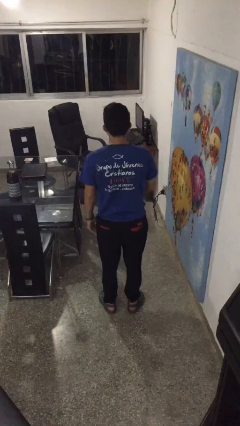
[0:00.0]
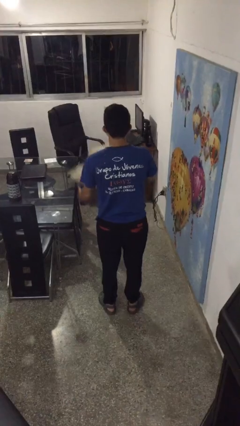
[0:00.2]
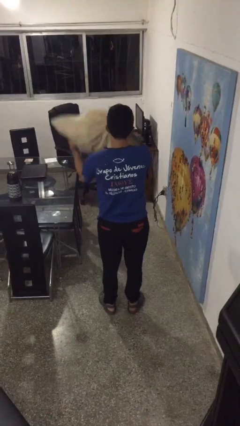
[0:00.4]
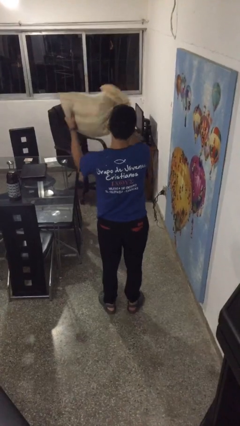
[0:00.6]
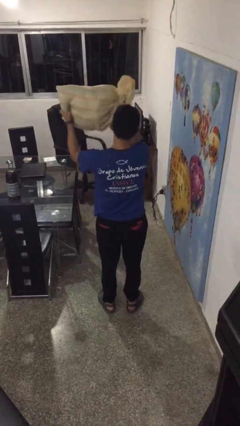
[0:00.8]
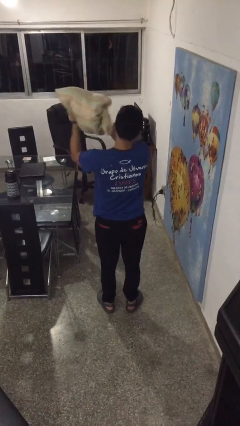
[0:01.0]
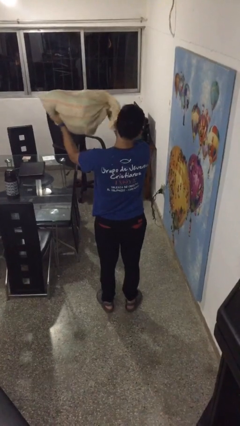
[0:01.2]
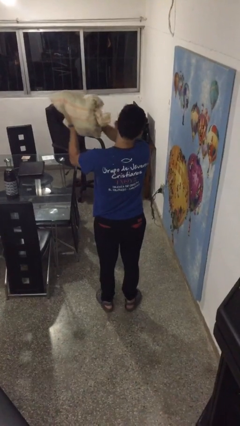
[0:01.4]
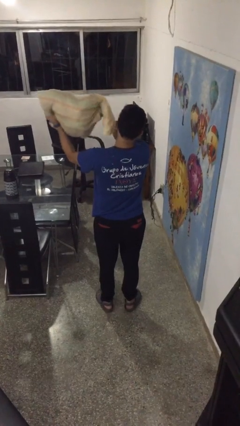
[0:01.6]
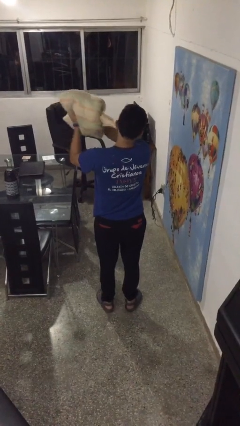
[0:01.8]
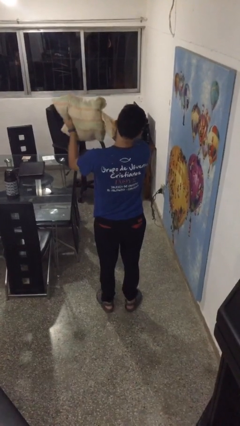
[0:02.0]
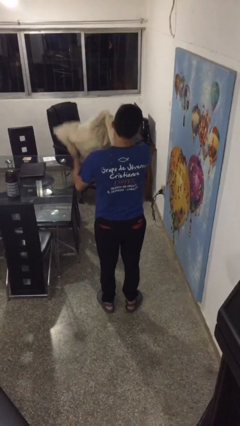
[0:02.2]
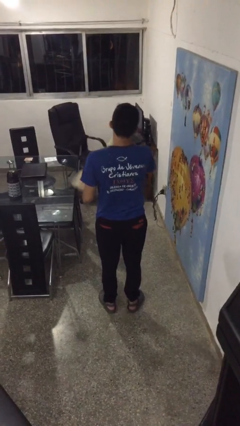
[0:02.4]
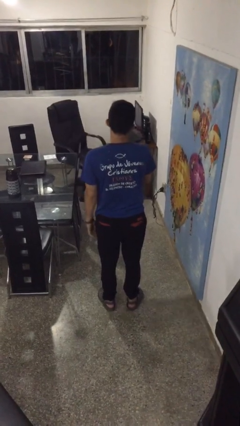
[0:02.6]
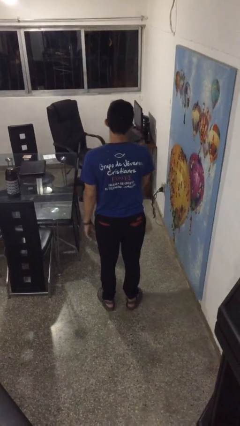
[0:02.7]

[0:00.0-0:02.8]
person squeezes object

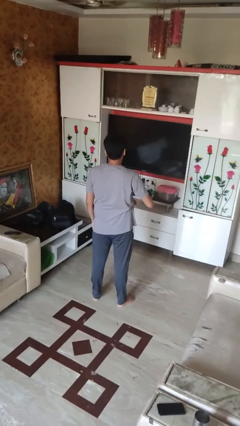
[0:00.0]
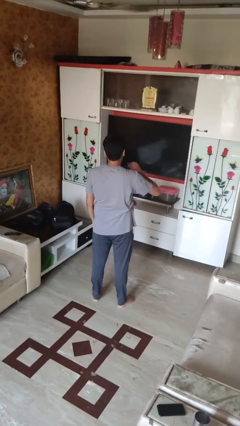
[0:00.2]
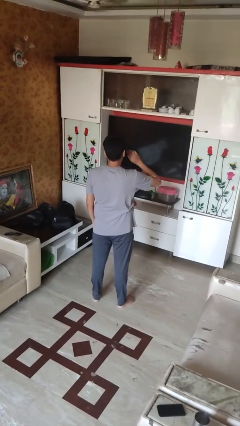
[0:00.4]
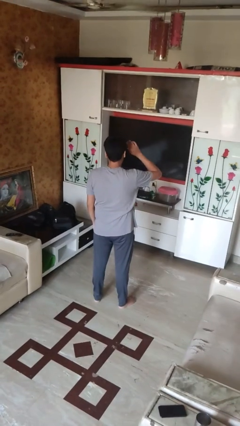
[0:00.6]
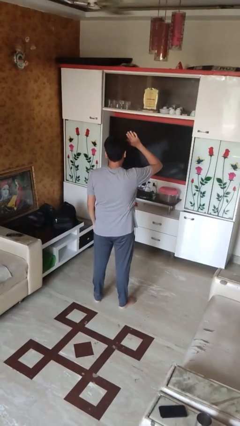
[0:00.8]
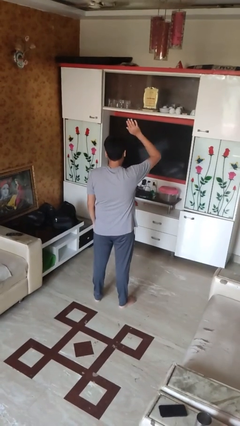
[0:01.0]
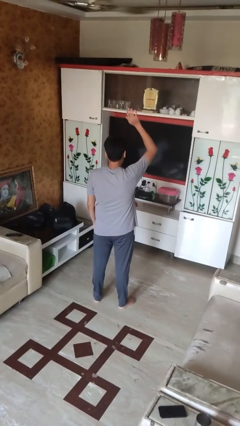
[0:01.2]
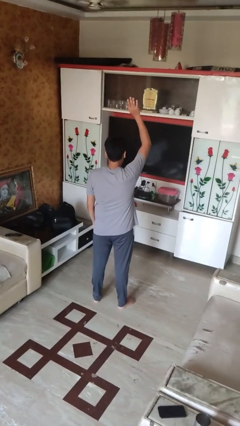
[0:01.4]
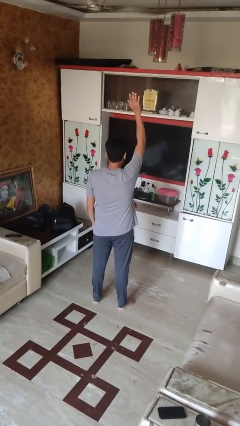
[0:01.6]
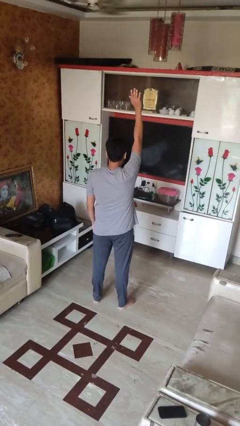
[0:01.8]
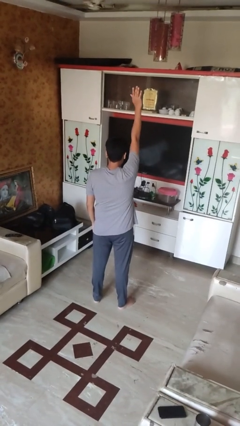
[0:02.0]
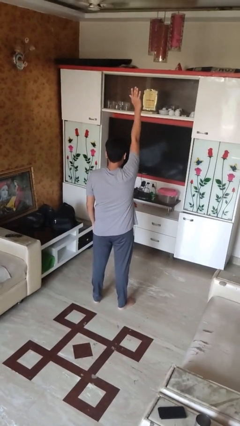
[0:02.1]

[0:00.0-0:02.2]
person gestures raise hand

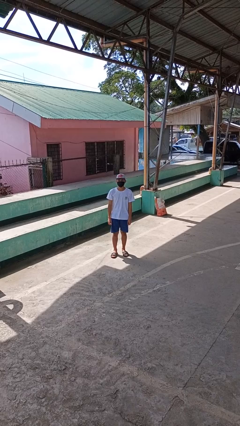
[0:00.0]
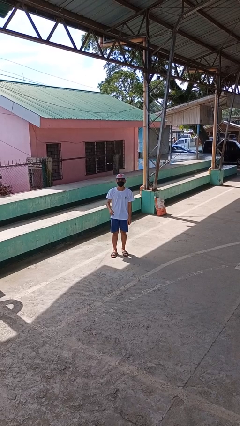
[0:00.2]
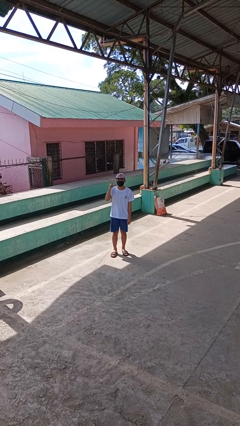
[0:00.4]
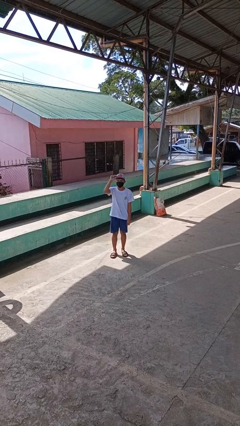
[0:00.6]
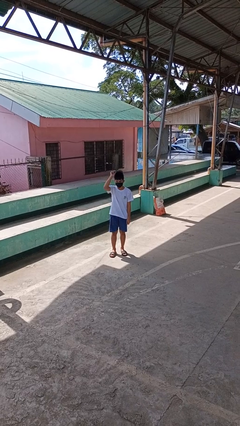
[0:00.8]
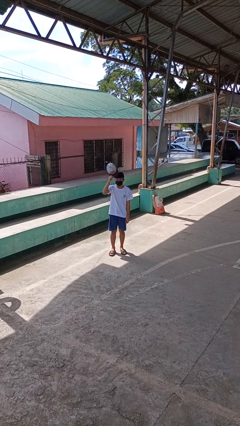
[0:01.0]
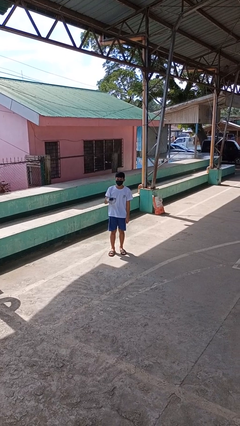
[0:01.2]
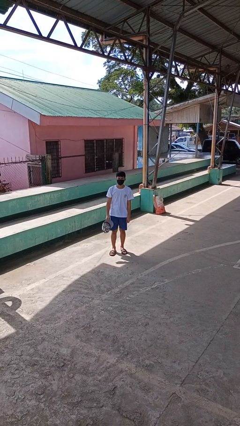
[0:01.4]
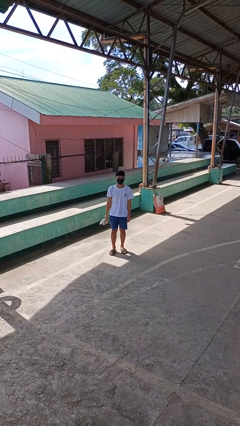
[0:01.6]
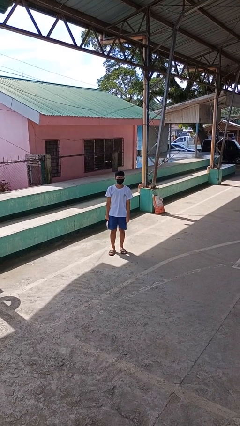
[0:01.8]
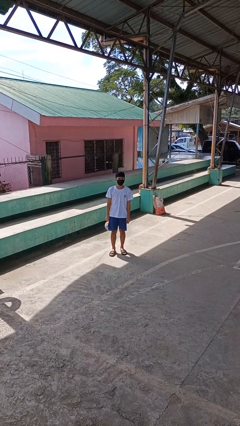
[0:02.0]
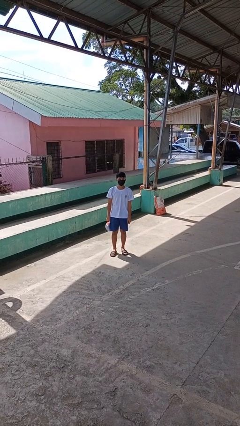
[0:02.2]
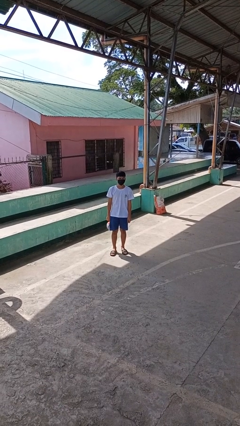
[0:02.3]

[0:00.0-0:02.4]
person takes off hat

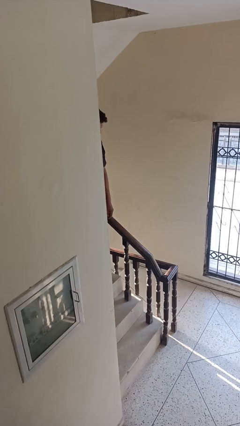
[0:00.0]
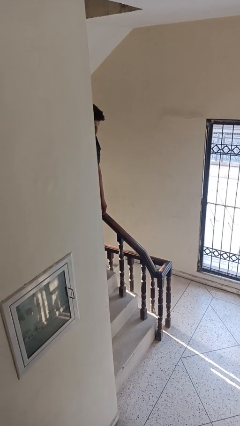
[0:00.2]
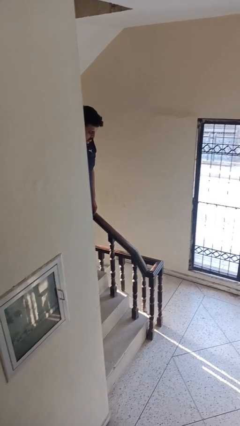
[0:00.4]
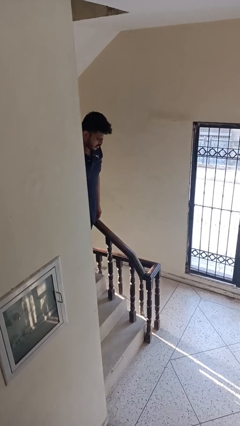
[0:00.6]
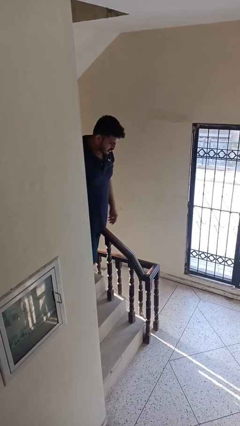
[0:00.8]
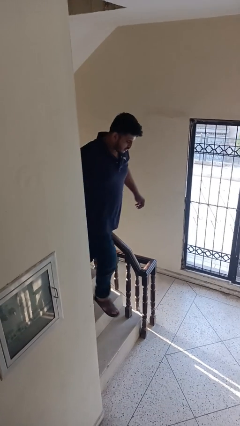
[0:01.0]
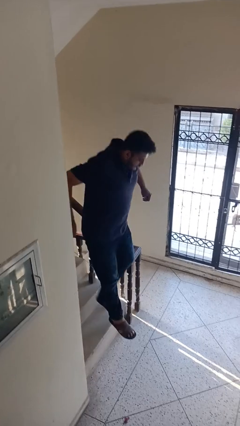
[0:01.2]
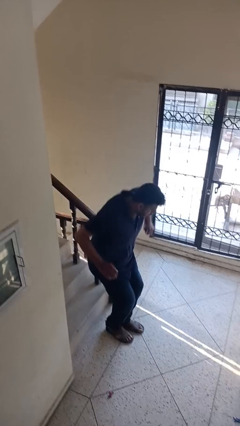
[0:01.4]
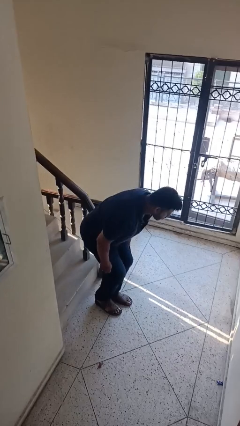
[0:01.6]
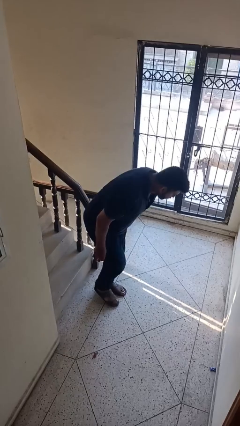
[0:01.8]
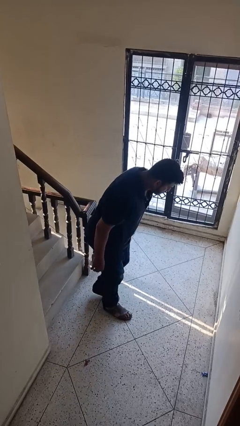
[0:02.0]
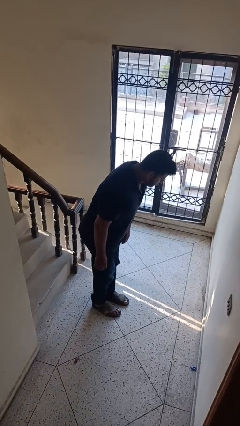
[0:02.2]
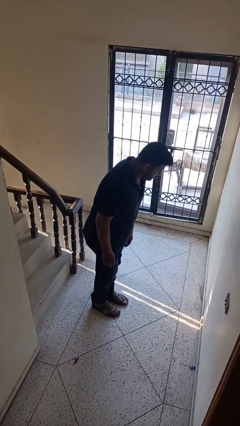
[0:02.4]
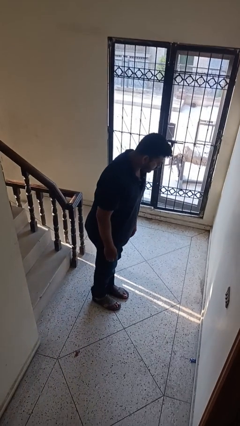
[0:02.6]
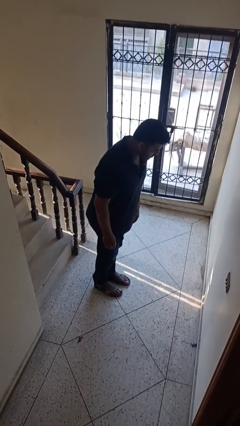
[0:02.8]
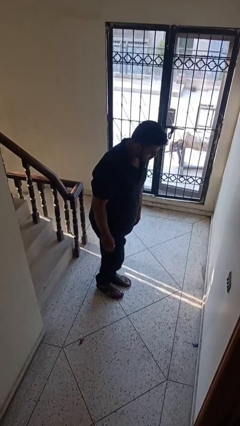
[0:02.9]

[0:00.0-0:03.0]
person climbs down stairs

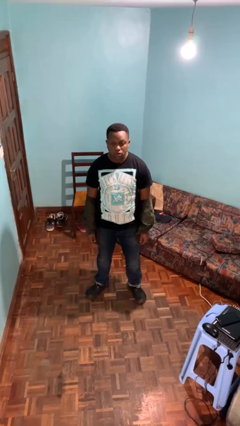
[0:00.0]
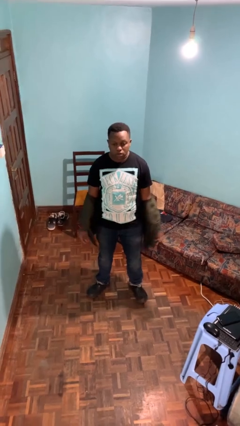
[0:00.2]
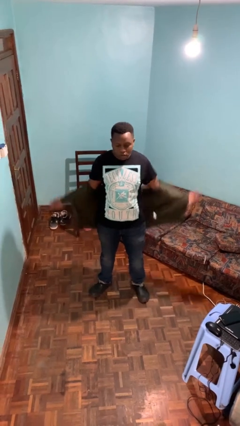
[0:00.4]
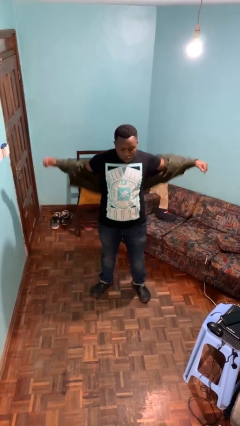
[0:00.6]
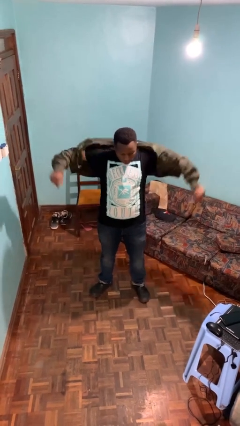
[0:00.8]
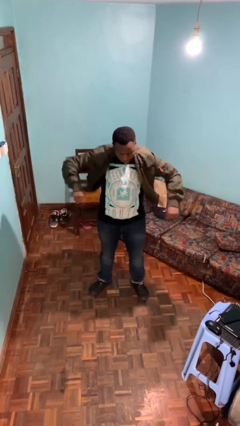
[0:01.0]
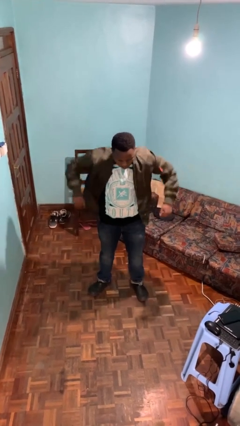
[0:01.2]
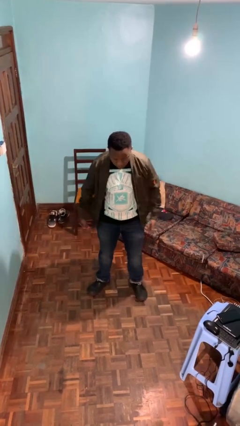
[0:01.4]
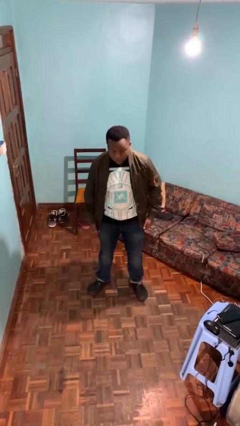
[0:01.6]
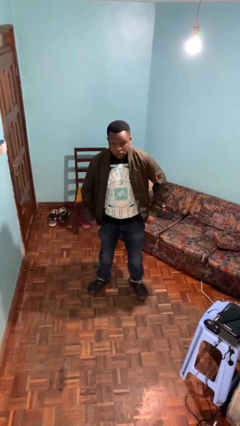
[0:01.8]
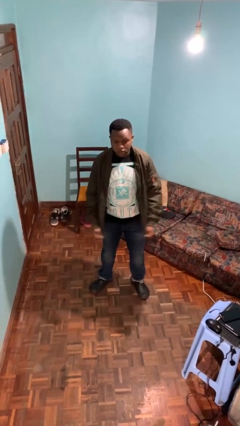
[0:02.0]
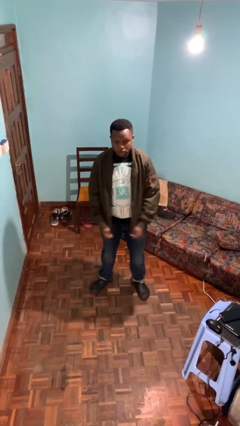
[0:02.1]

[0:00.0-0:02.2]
person puts on jacket

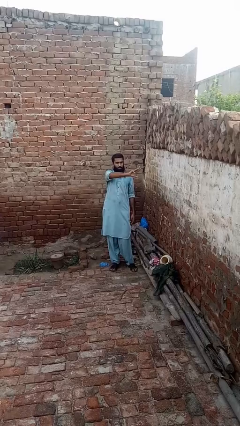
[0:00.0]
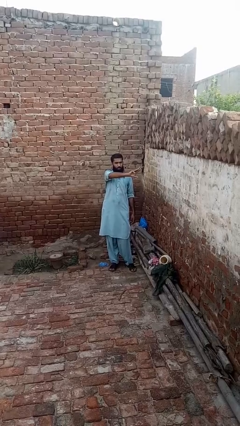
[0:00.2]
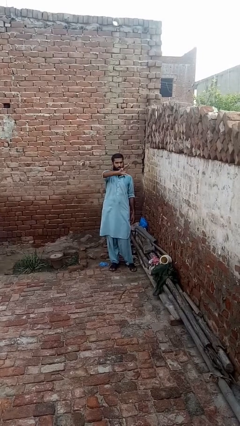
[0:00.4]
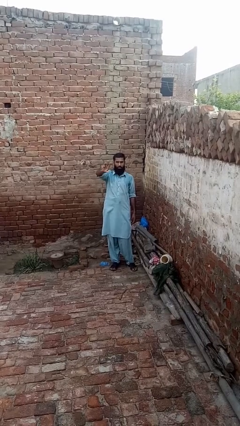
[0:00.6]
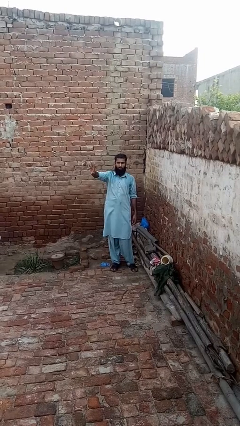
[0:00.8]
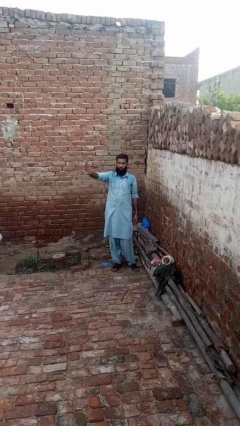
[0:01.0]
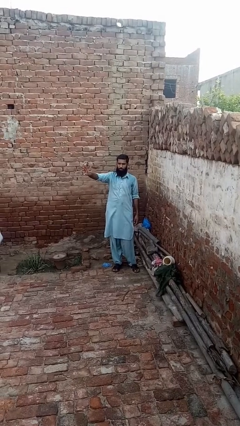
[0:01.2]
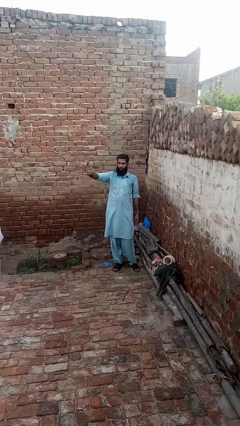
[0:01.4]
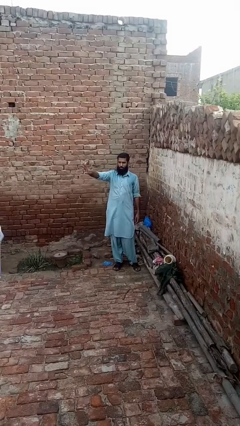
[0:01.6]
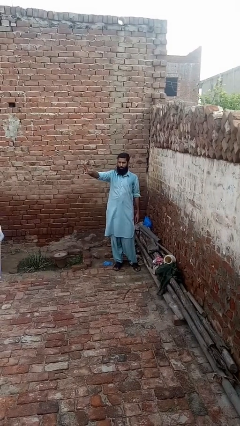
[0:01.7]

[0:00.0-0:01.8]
person gestures swipe right

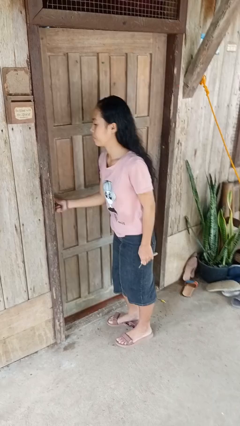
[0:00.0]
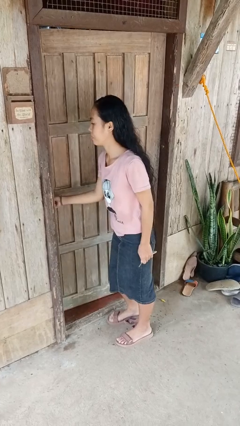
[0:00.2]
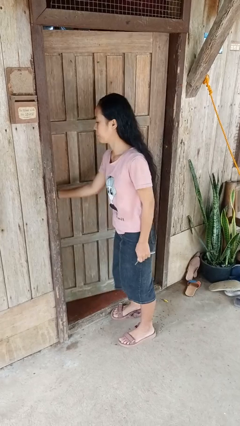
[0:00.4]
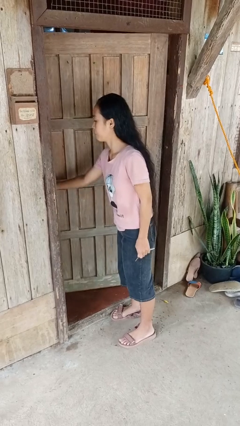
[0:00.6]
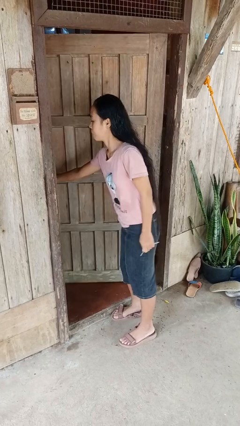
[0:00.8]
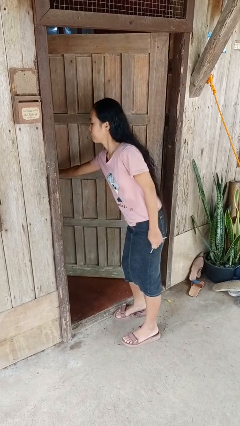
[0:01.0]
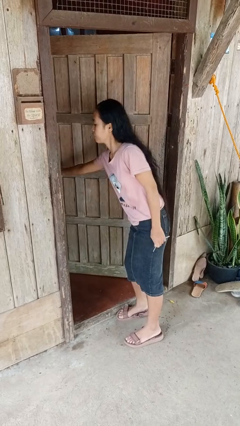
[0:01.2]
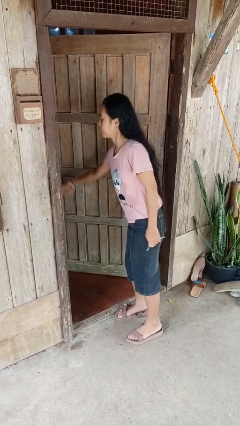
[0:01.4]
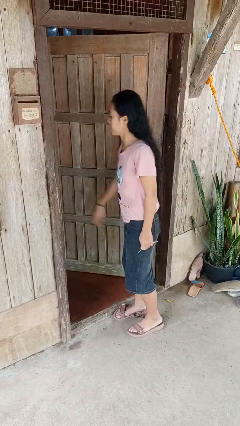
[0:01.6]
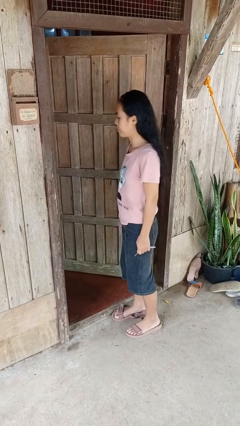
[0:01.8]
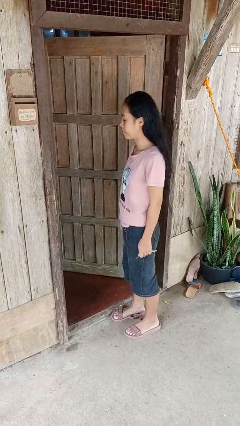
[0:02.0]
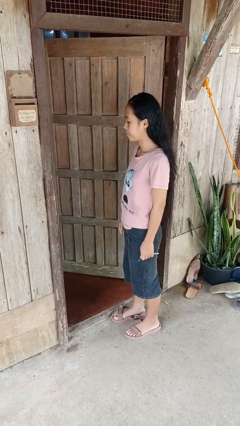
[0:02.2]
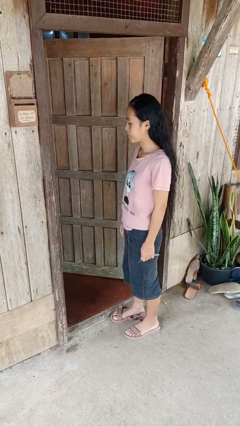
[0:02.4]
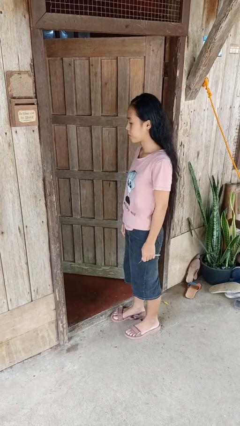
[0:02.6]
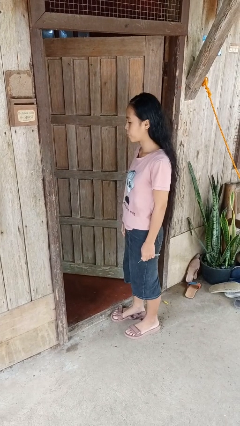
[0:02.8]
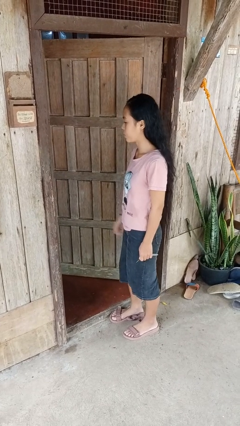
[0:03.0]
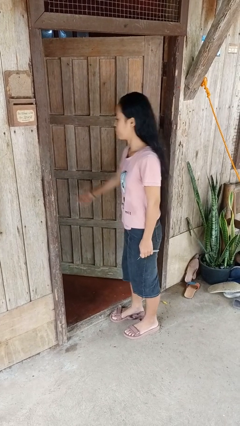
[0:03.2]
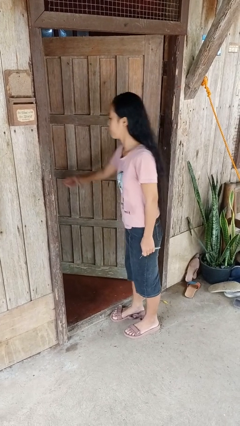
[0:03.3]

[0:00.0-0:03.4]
person opens facility door
